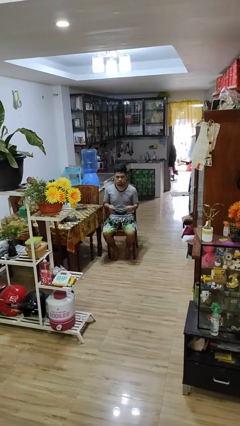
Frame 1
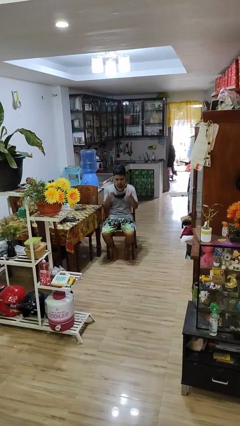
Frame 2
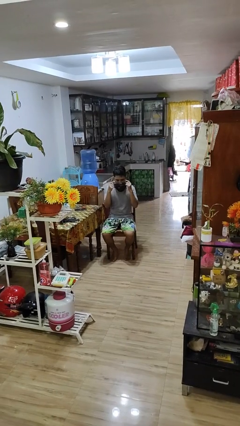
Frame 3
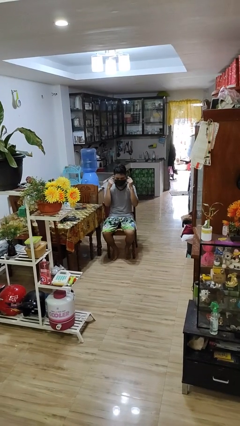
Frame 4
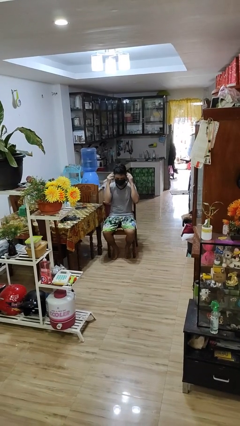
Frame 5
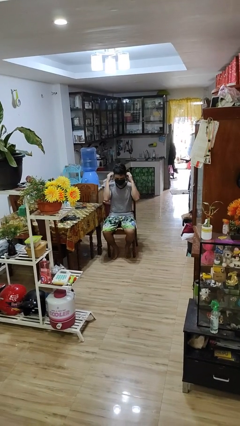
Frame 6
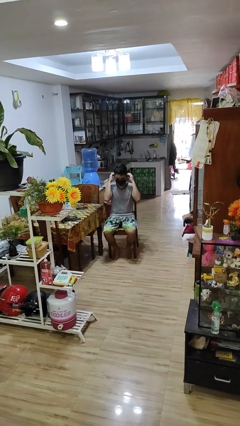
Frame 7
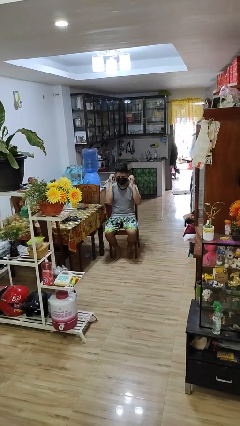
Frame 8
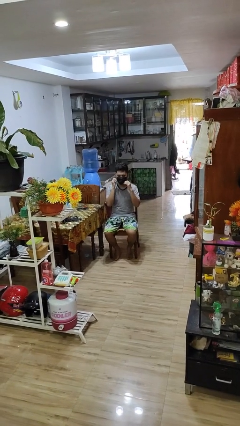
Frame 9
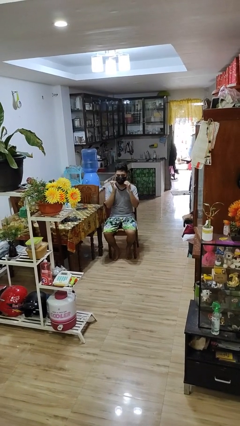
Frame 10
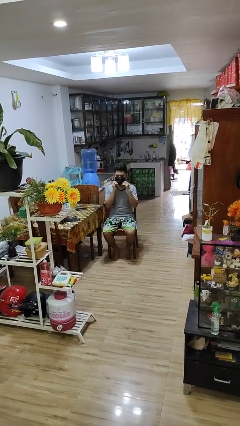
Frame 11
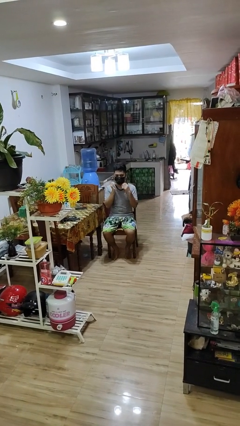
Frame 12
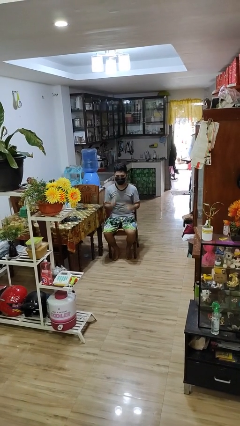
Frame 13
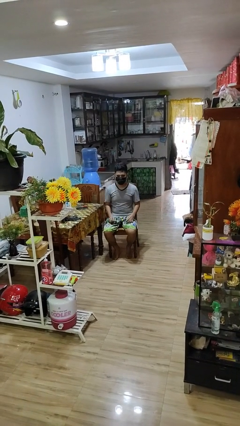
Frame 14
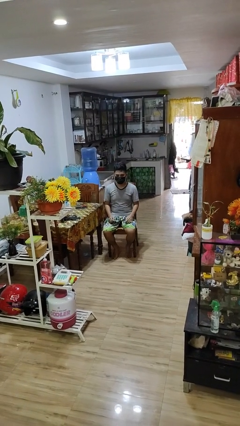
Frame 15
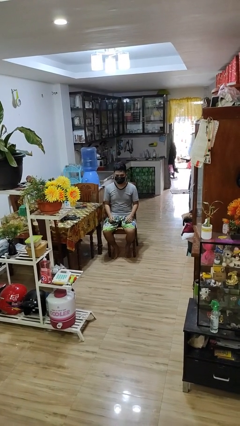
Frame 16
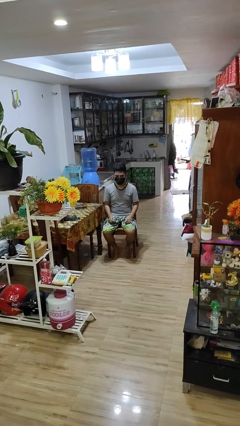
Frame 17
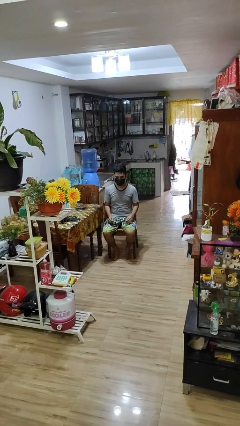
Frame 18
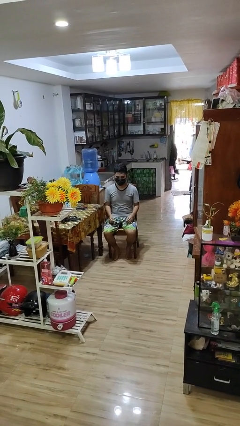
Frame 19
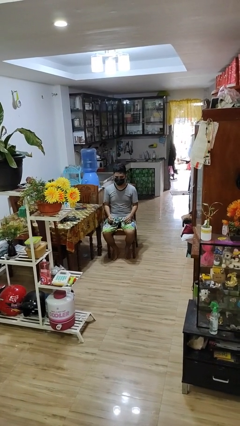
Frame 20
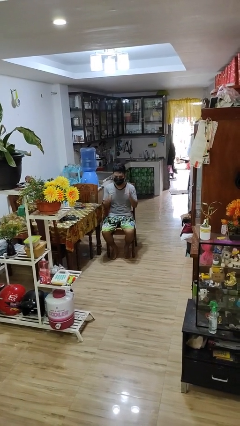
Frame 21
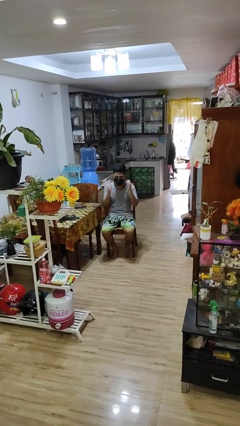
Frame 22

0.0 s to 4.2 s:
person puts on facemask

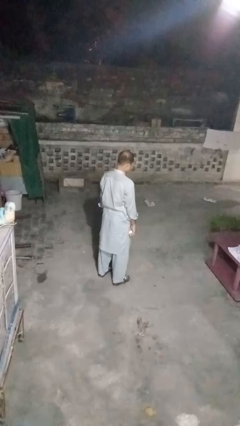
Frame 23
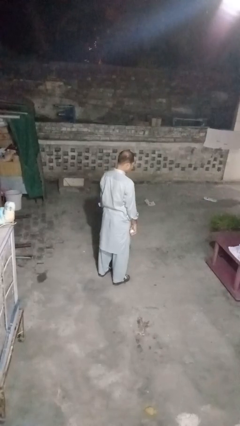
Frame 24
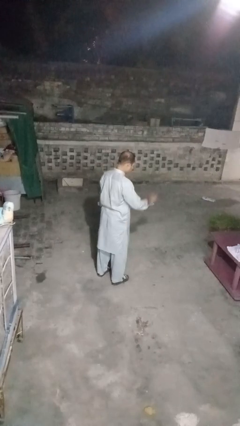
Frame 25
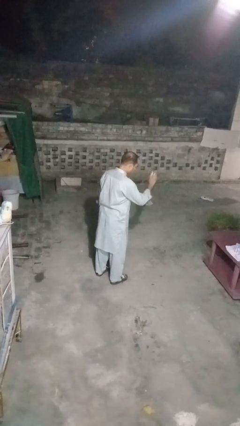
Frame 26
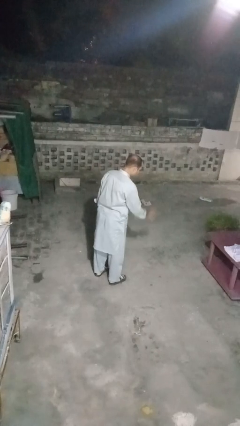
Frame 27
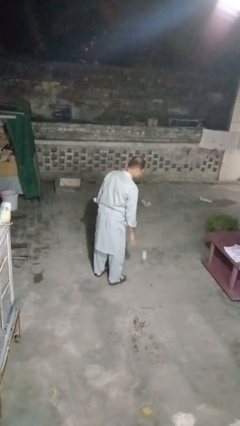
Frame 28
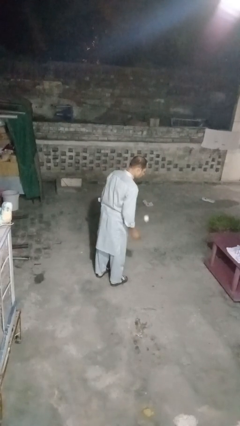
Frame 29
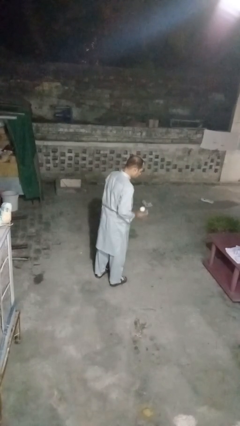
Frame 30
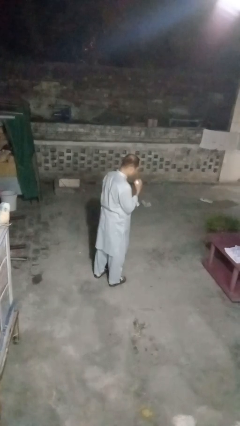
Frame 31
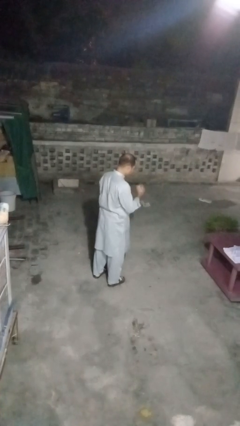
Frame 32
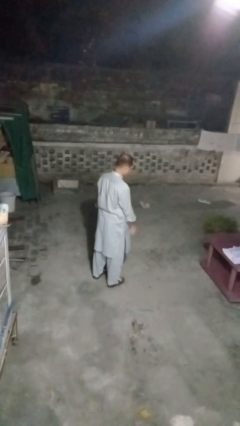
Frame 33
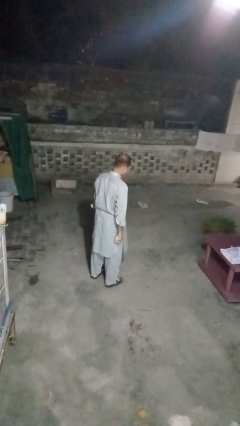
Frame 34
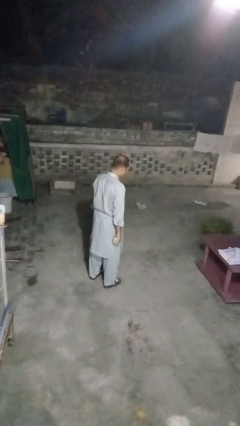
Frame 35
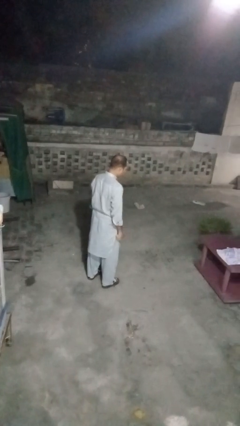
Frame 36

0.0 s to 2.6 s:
person bounces ball on floor

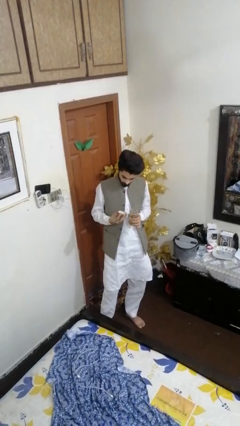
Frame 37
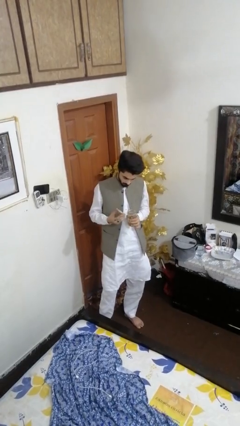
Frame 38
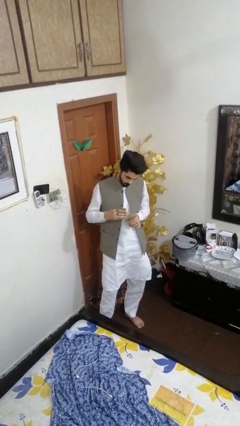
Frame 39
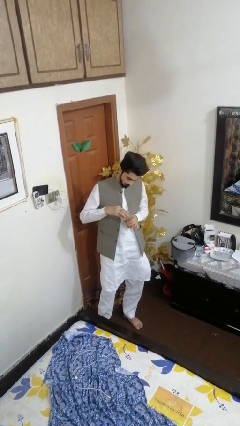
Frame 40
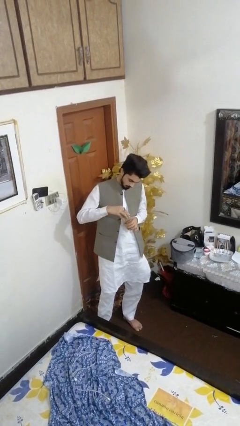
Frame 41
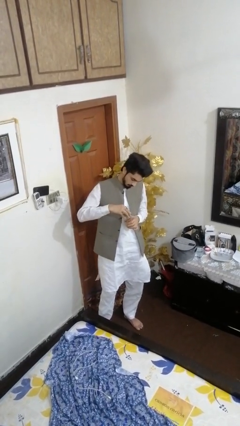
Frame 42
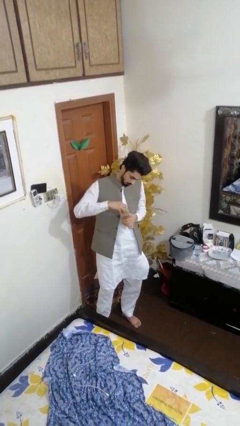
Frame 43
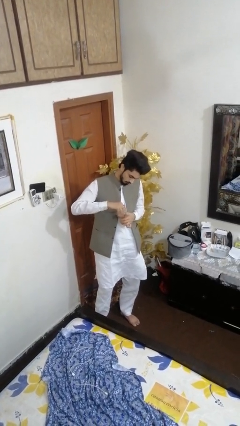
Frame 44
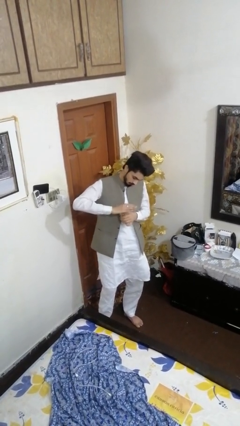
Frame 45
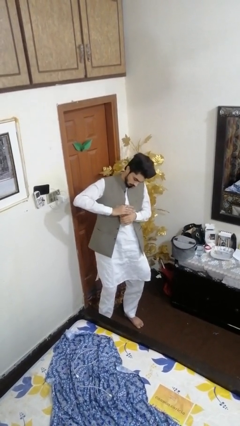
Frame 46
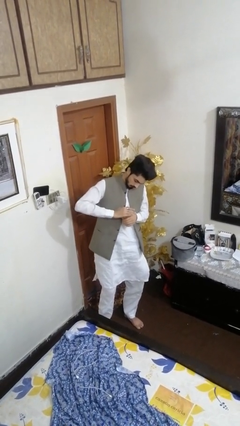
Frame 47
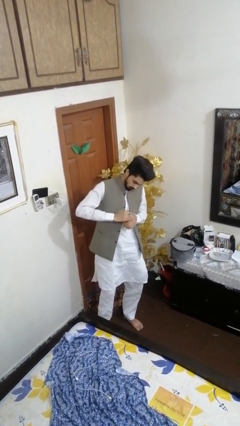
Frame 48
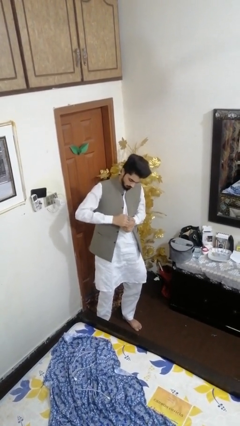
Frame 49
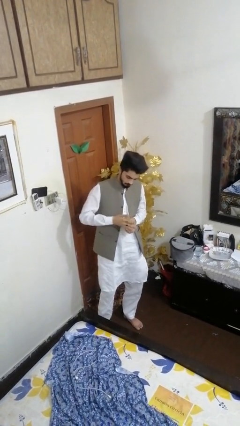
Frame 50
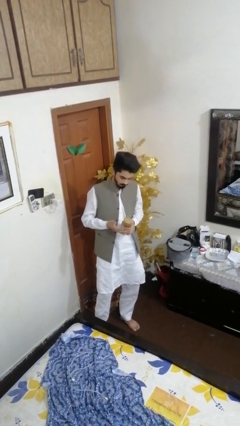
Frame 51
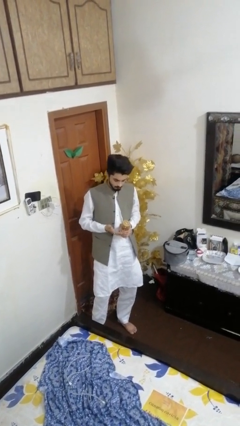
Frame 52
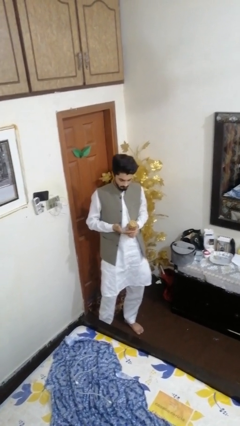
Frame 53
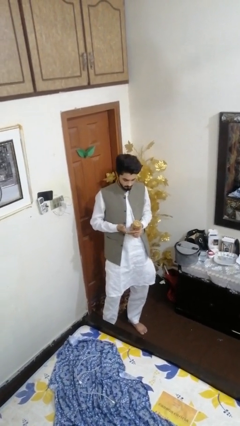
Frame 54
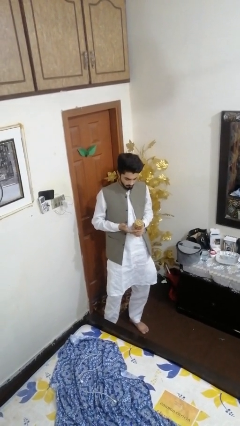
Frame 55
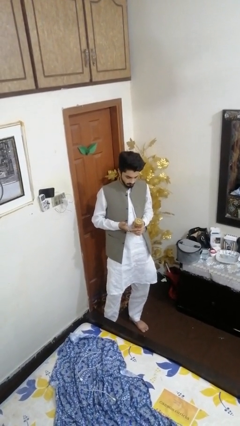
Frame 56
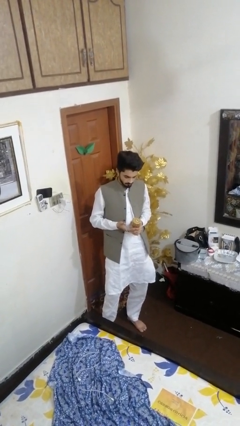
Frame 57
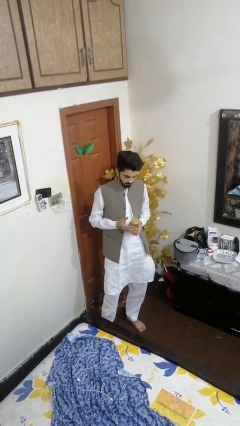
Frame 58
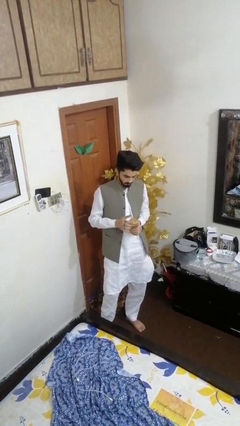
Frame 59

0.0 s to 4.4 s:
person closes jar

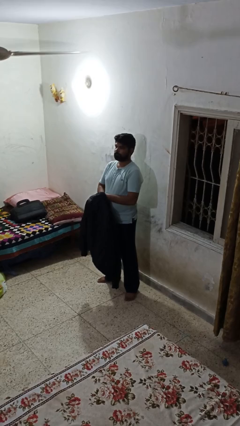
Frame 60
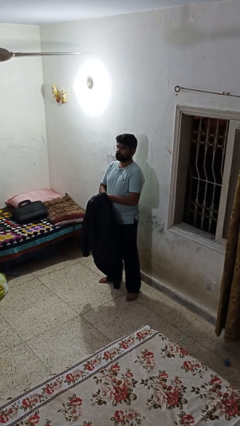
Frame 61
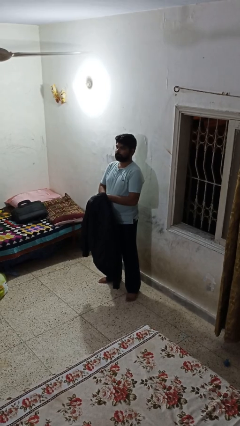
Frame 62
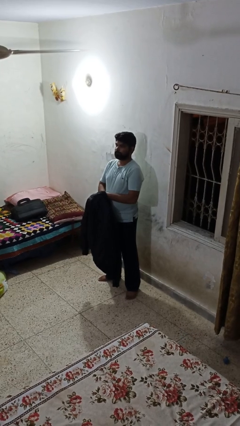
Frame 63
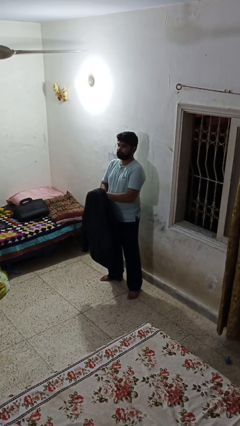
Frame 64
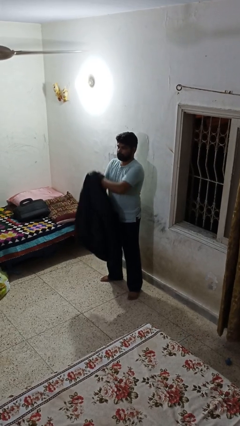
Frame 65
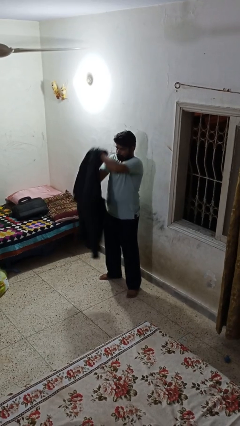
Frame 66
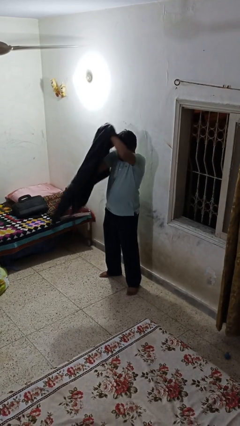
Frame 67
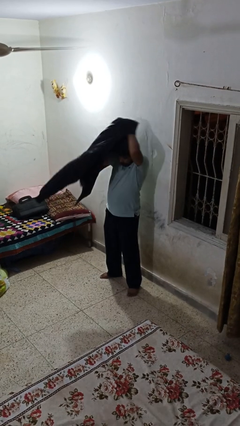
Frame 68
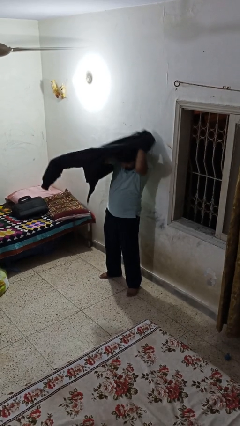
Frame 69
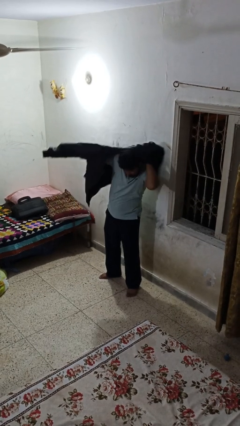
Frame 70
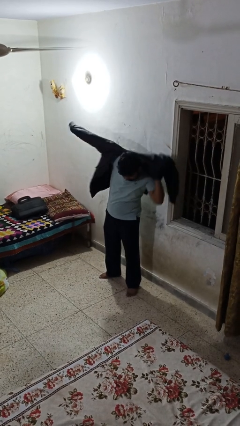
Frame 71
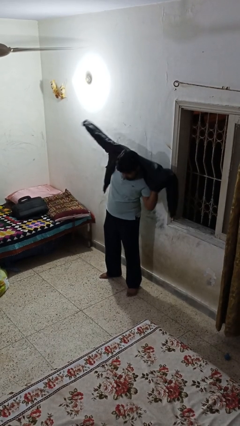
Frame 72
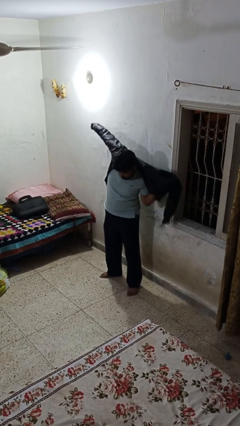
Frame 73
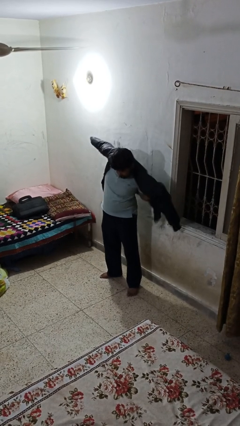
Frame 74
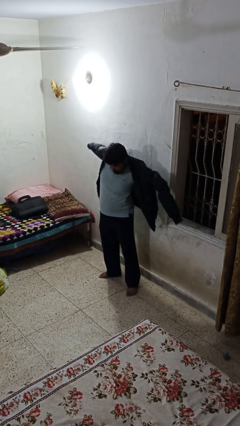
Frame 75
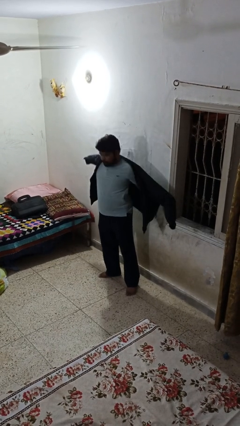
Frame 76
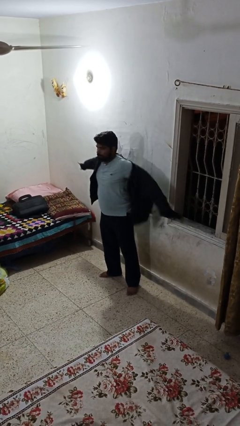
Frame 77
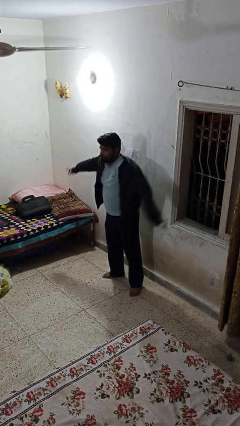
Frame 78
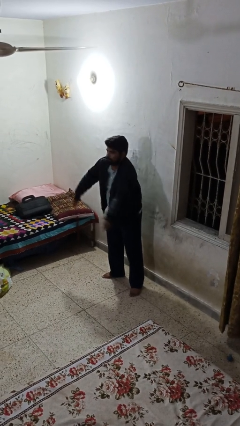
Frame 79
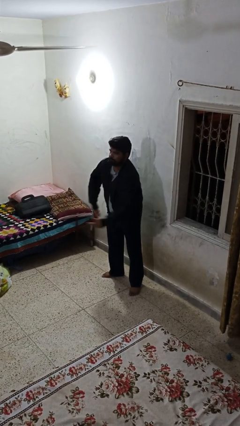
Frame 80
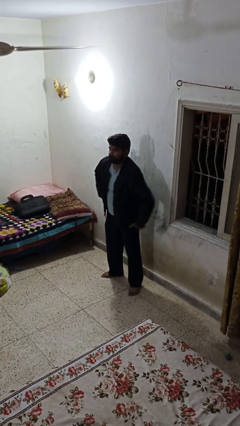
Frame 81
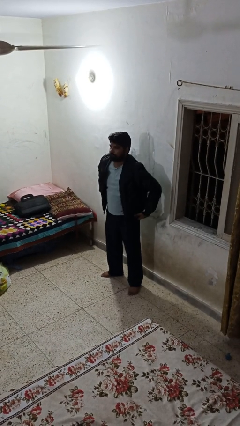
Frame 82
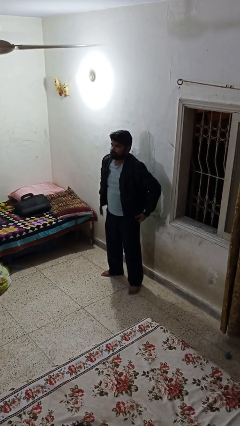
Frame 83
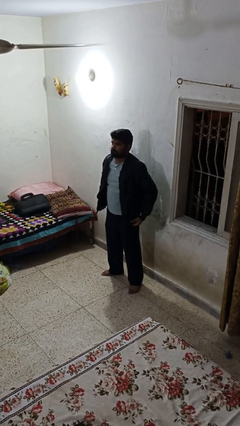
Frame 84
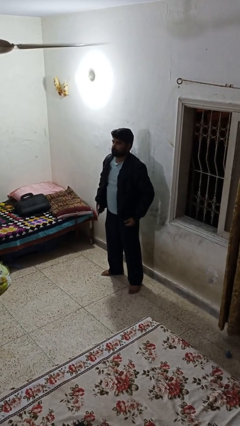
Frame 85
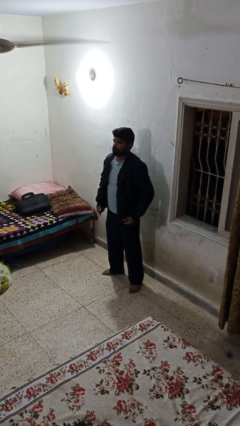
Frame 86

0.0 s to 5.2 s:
person puts on jacket

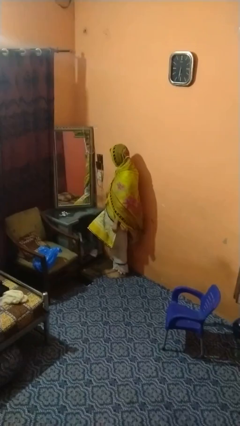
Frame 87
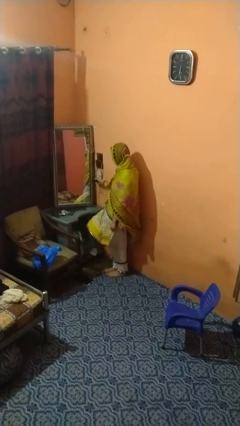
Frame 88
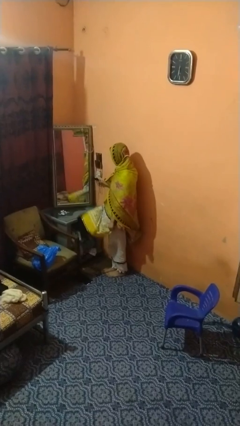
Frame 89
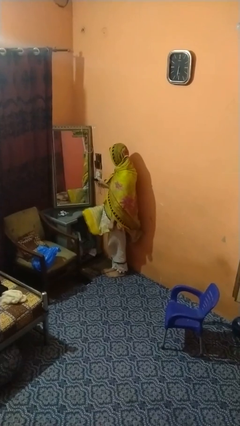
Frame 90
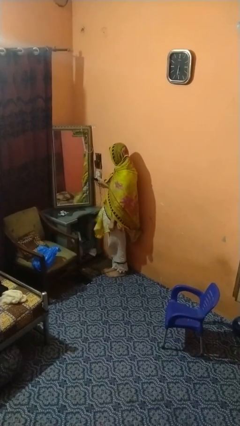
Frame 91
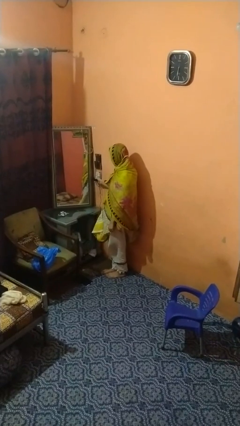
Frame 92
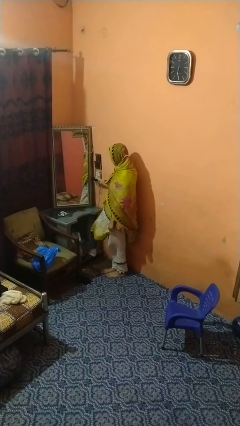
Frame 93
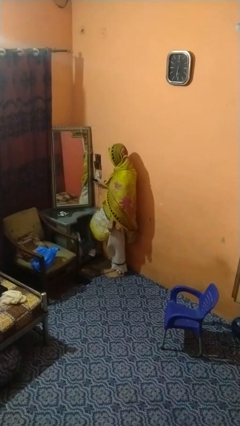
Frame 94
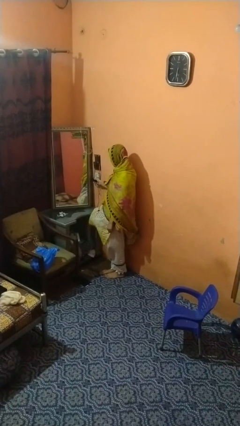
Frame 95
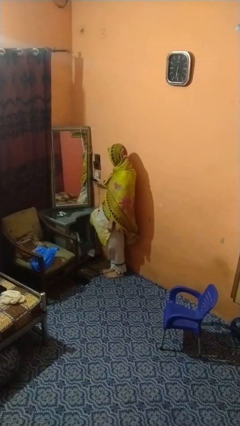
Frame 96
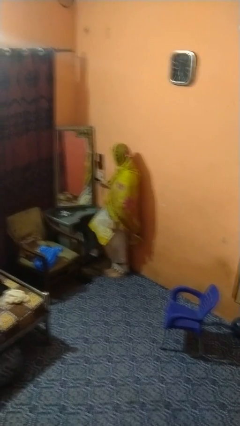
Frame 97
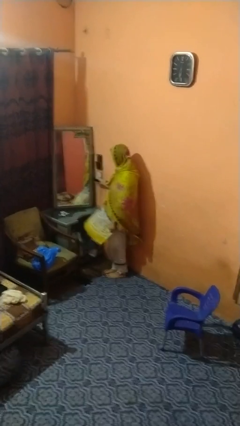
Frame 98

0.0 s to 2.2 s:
person plugs into electrical socket
